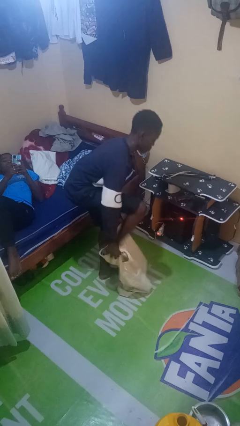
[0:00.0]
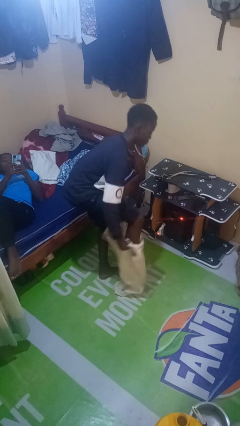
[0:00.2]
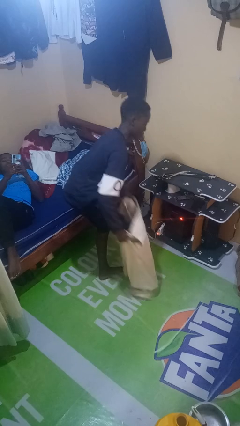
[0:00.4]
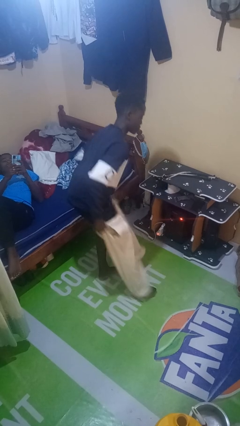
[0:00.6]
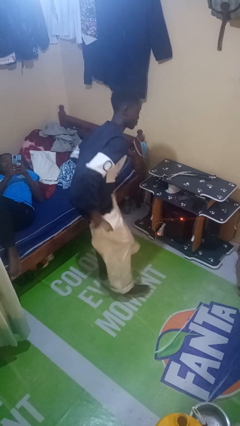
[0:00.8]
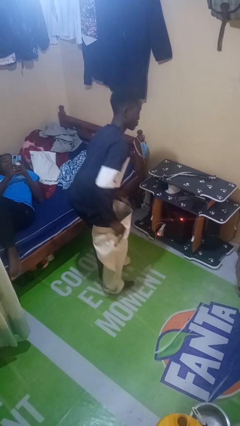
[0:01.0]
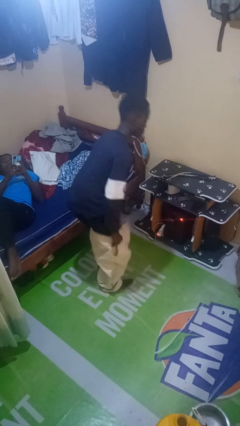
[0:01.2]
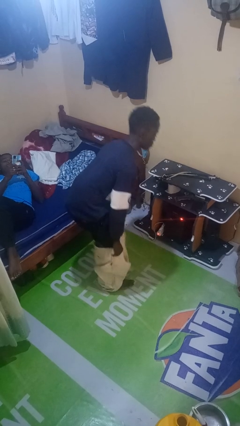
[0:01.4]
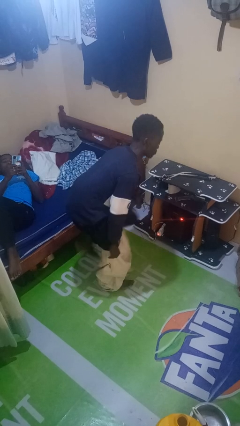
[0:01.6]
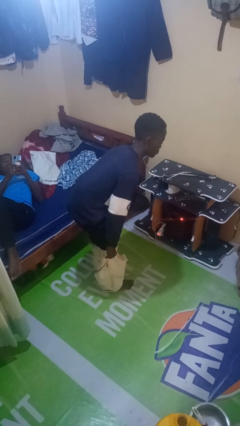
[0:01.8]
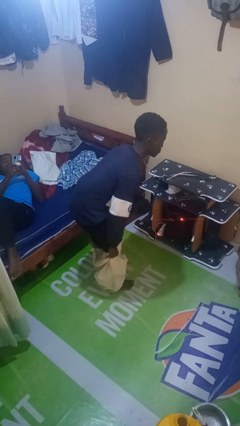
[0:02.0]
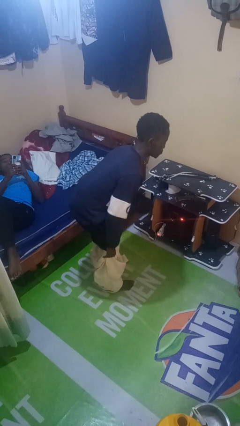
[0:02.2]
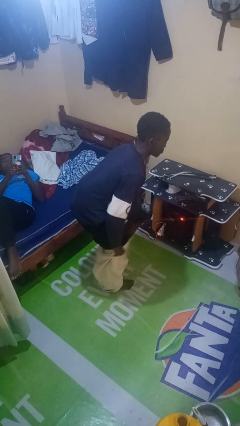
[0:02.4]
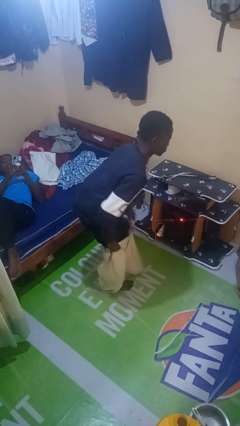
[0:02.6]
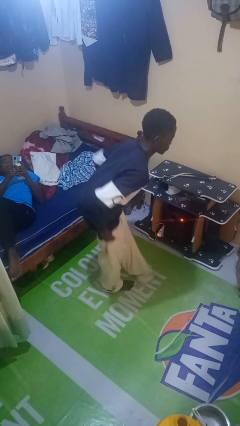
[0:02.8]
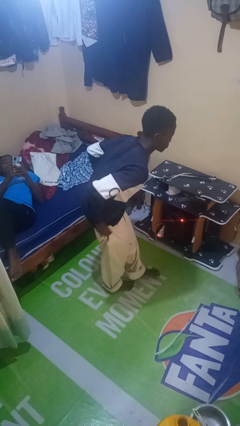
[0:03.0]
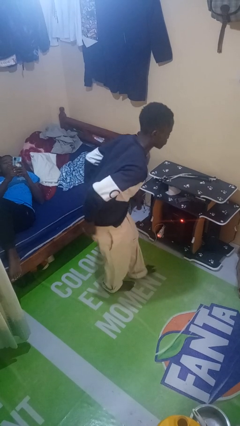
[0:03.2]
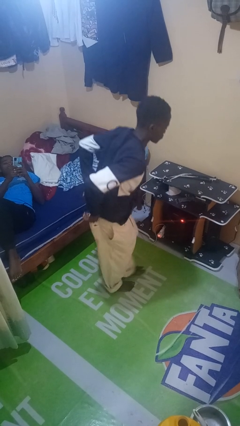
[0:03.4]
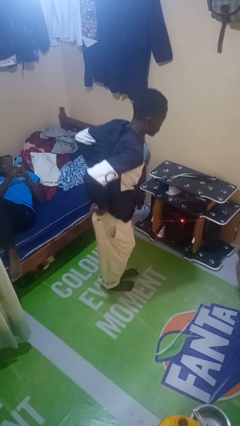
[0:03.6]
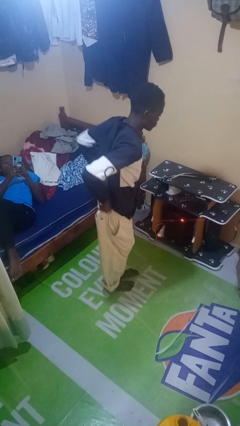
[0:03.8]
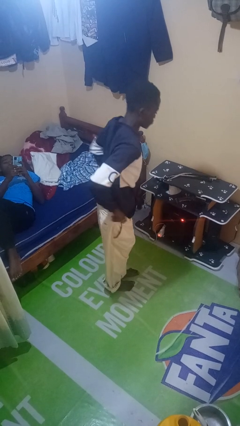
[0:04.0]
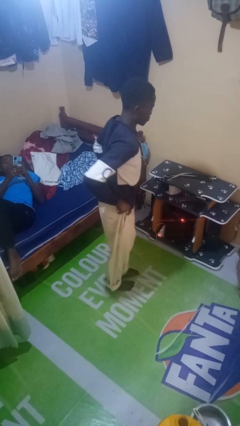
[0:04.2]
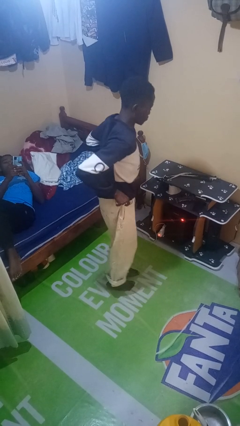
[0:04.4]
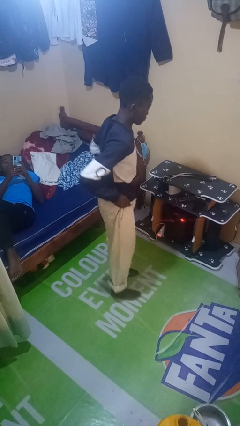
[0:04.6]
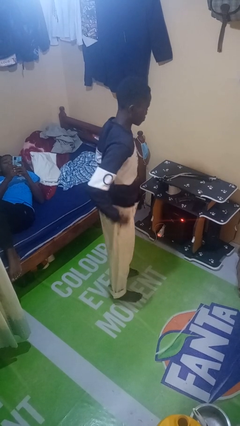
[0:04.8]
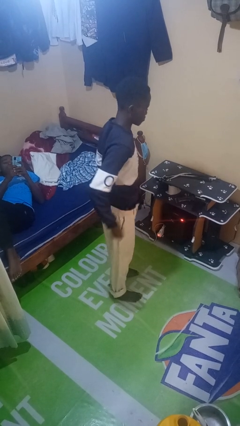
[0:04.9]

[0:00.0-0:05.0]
person puts on pants

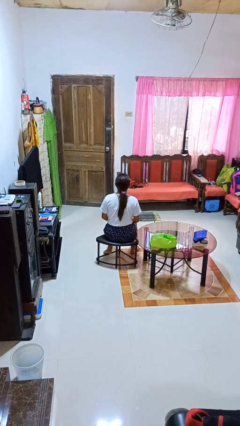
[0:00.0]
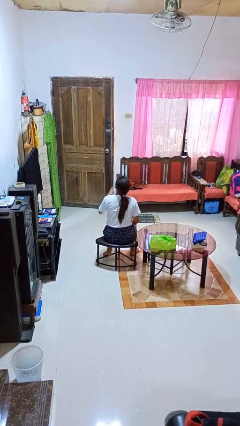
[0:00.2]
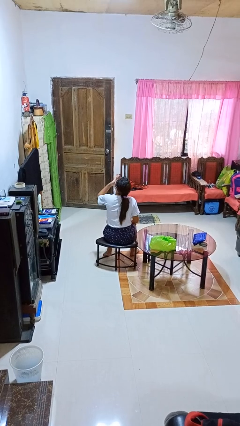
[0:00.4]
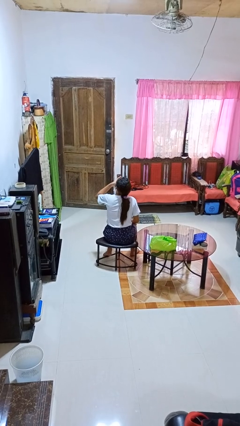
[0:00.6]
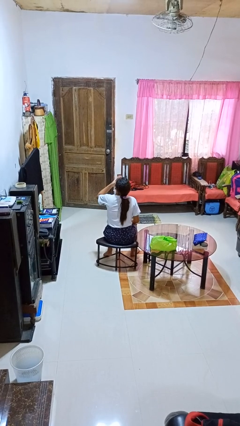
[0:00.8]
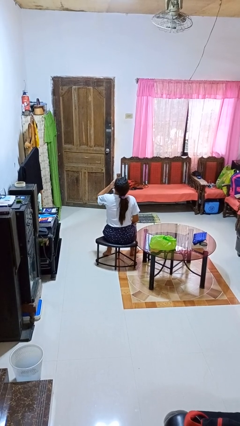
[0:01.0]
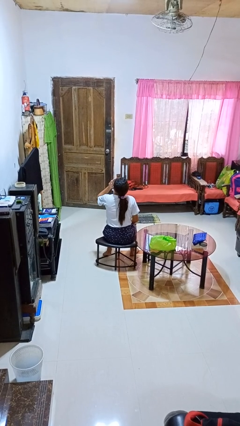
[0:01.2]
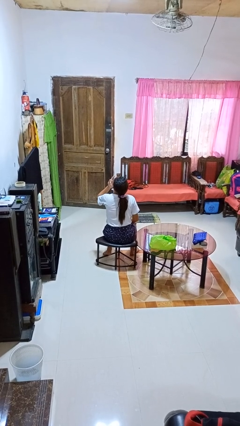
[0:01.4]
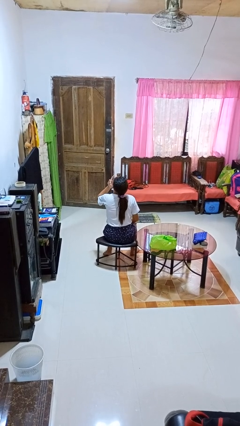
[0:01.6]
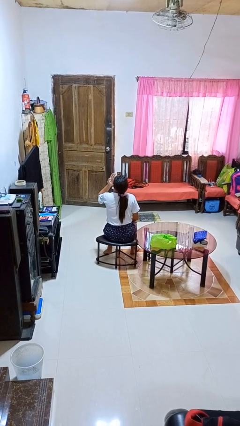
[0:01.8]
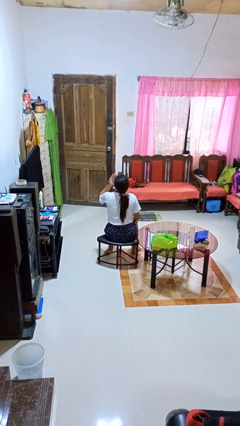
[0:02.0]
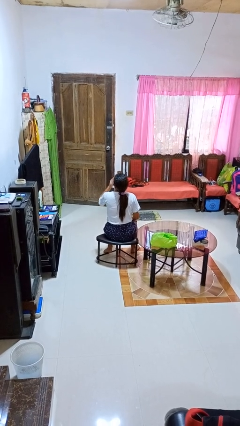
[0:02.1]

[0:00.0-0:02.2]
person licks fingers

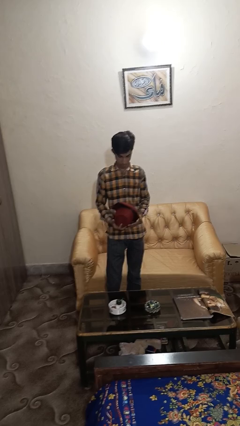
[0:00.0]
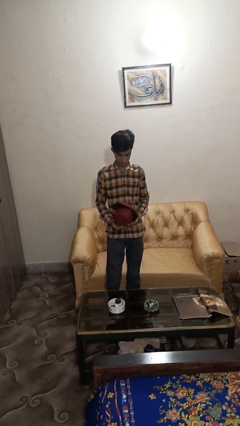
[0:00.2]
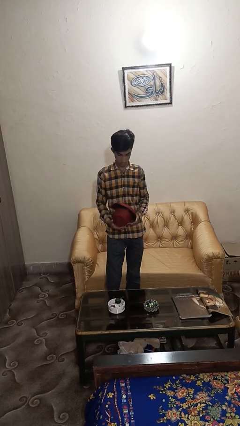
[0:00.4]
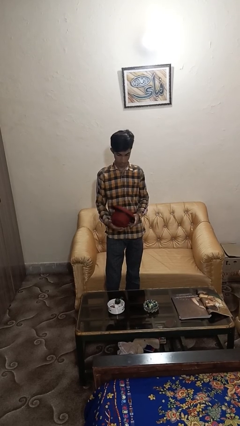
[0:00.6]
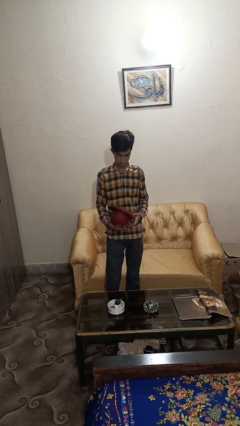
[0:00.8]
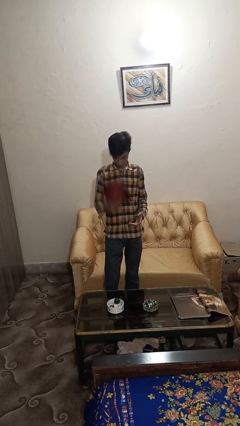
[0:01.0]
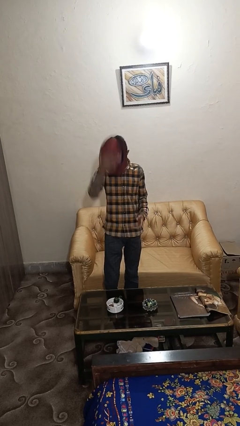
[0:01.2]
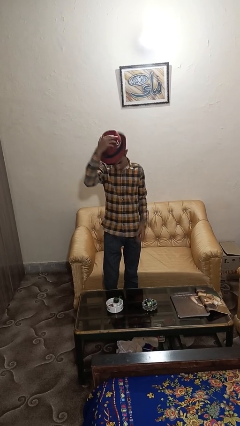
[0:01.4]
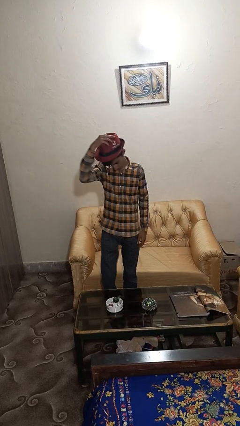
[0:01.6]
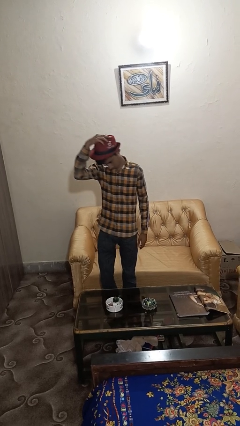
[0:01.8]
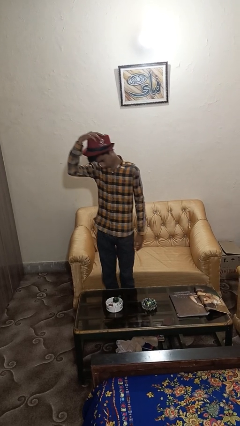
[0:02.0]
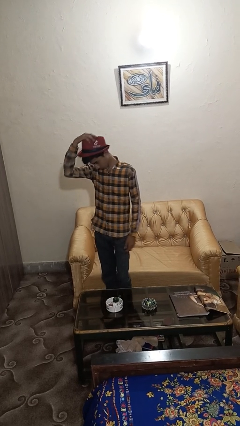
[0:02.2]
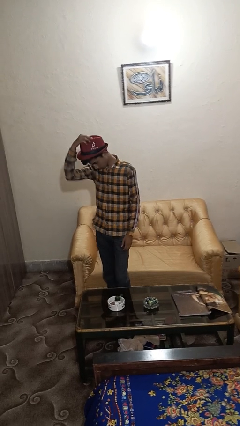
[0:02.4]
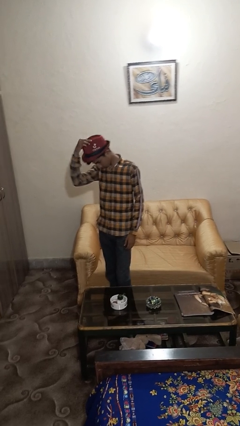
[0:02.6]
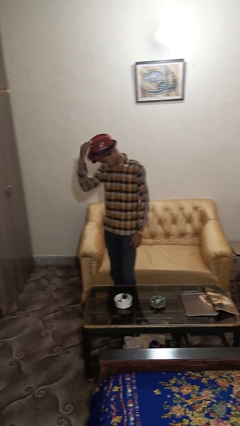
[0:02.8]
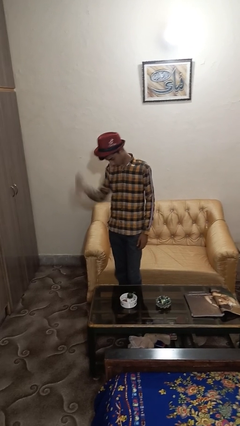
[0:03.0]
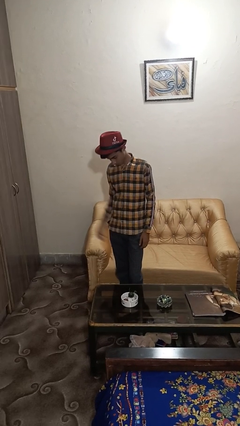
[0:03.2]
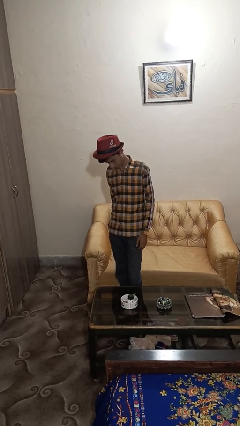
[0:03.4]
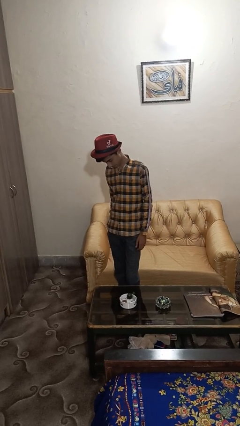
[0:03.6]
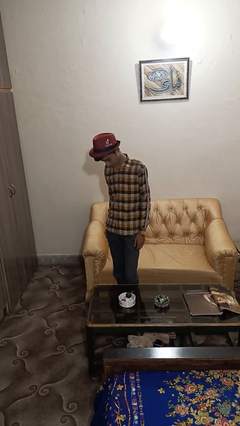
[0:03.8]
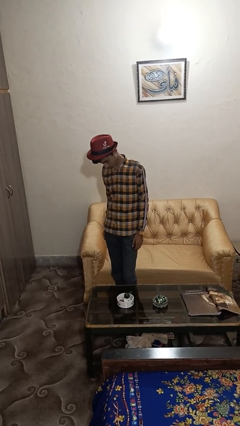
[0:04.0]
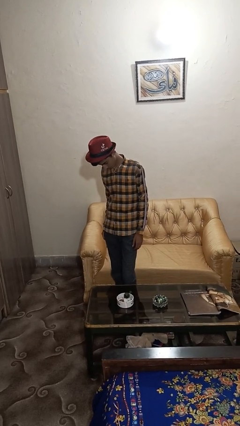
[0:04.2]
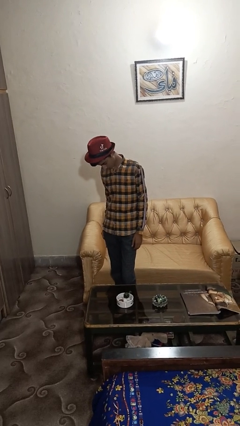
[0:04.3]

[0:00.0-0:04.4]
person puts on hat

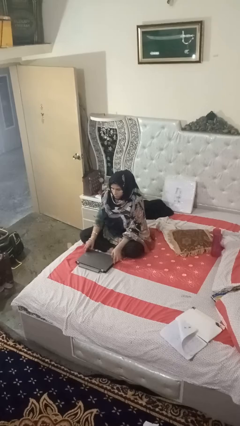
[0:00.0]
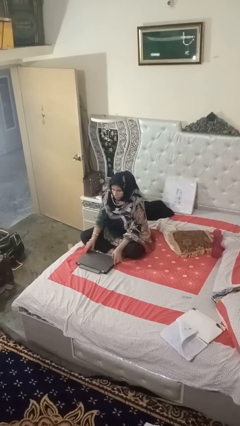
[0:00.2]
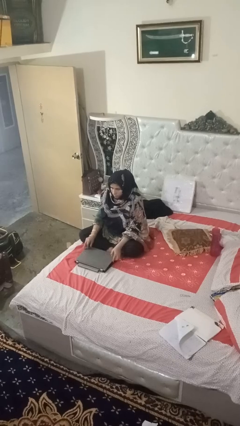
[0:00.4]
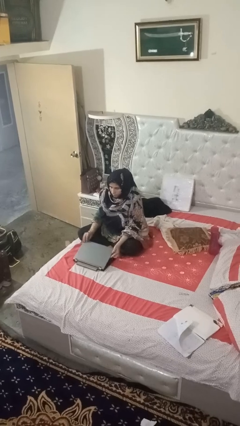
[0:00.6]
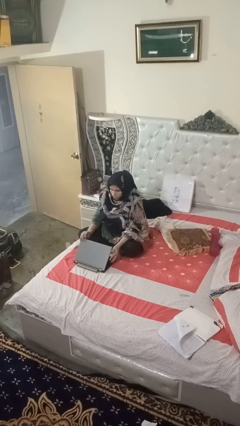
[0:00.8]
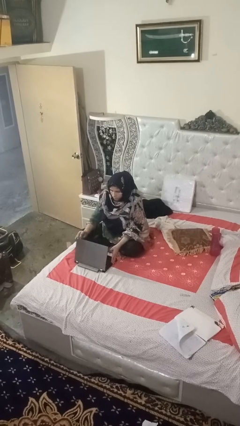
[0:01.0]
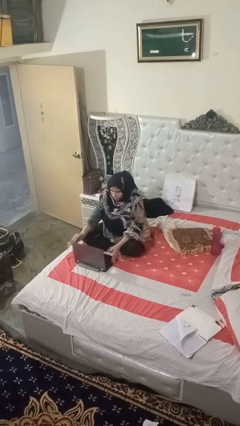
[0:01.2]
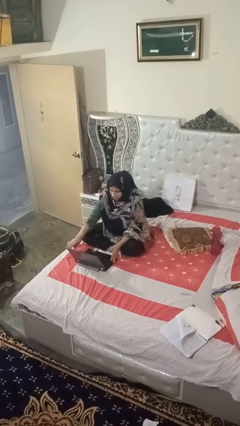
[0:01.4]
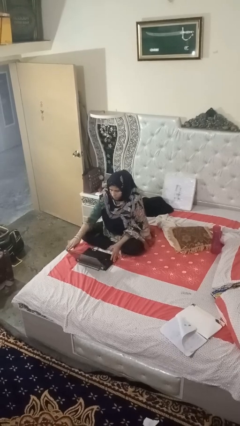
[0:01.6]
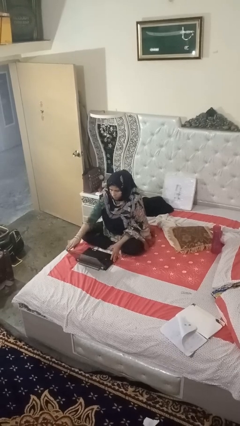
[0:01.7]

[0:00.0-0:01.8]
person opens laptop

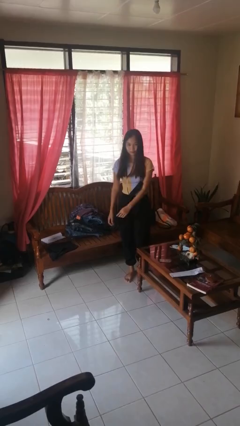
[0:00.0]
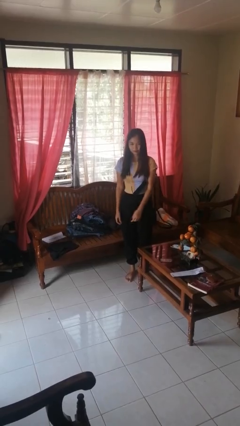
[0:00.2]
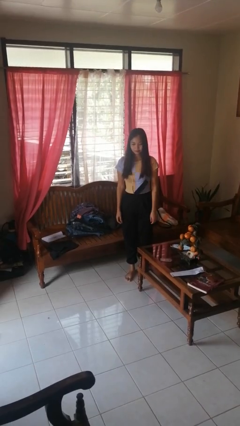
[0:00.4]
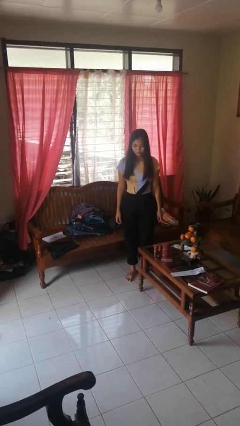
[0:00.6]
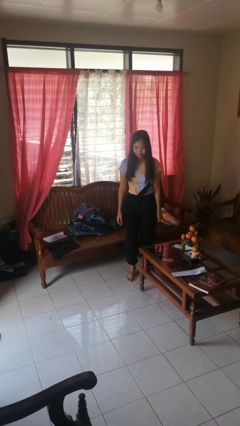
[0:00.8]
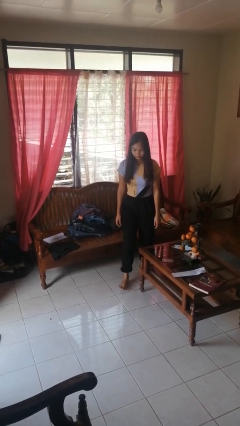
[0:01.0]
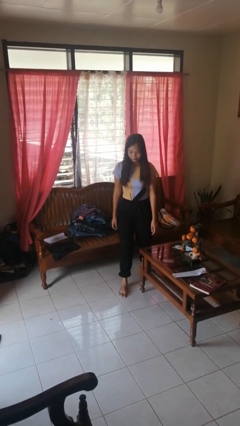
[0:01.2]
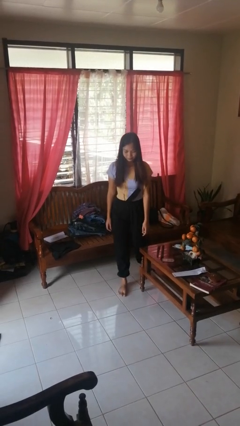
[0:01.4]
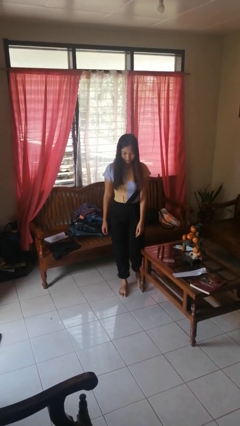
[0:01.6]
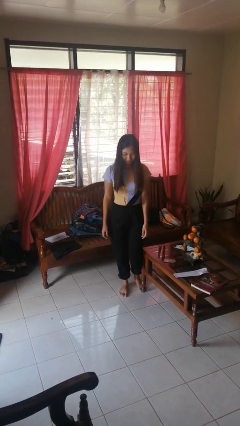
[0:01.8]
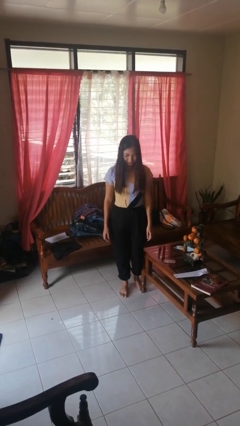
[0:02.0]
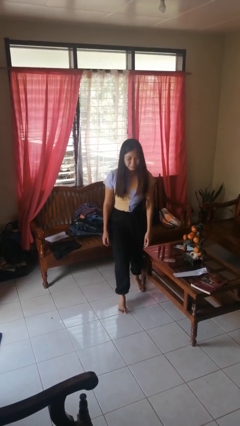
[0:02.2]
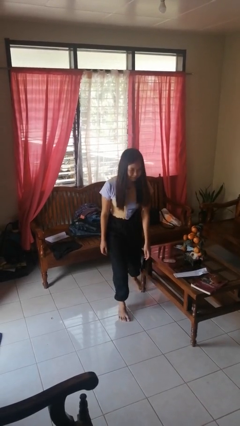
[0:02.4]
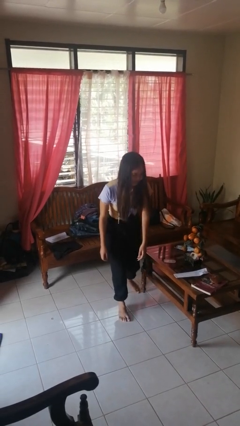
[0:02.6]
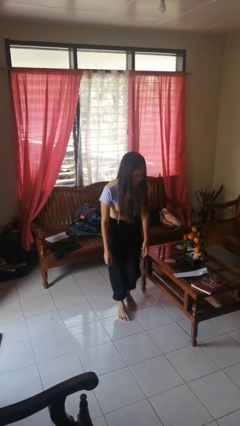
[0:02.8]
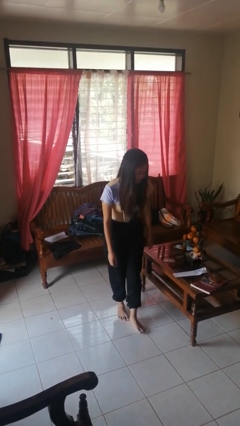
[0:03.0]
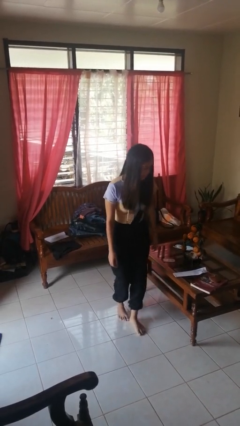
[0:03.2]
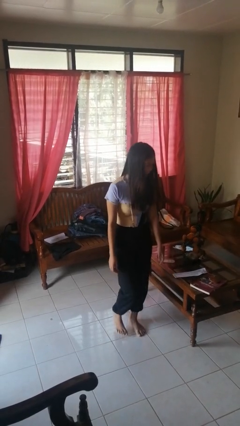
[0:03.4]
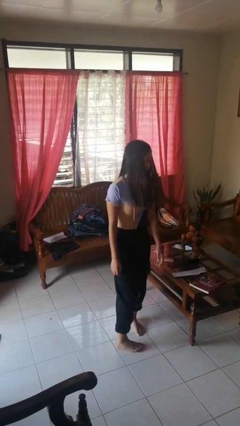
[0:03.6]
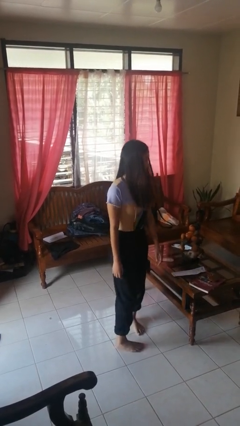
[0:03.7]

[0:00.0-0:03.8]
person bumps into table

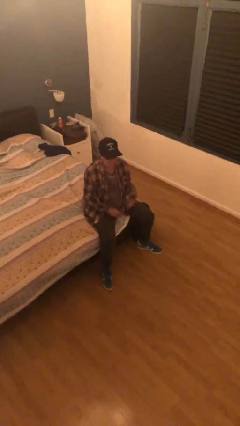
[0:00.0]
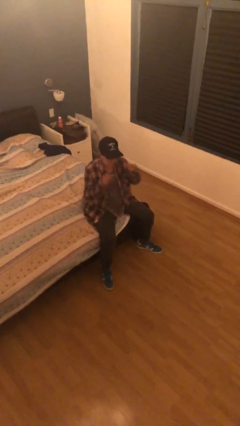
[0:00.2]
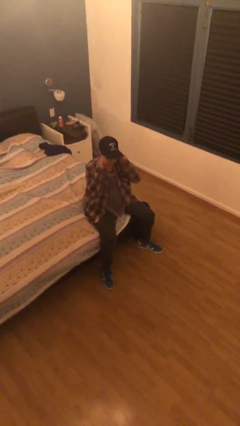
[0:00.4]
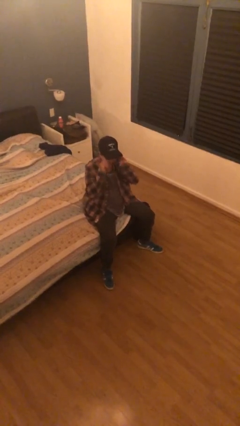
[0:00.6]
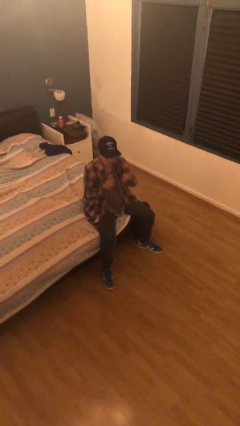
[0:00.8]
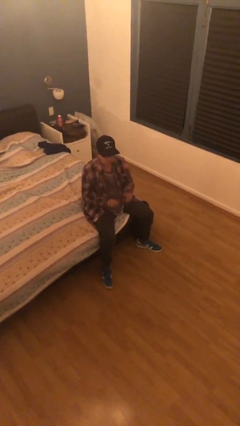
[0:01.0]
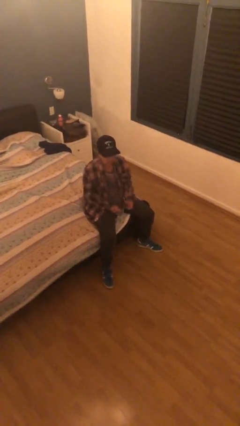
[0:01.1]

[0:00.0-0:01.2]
person takes off glasses
